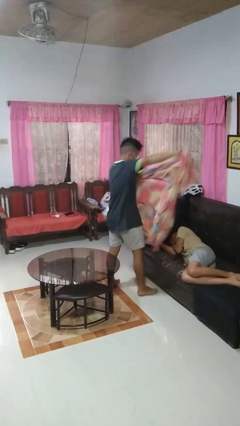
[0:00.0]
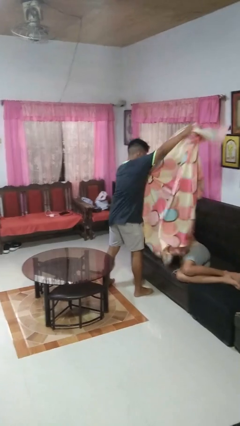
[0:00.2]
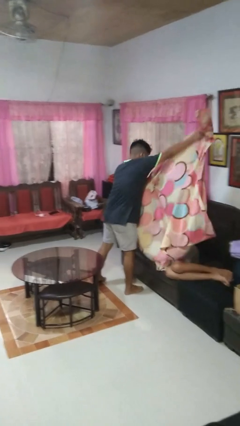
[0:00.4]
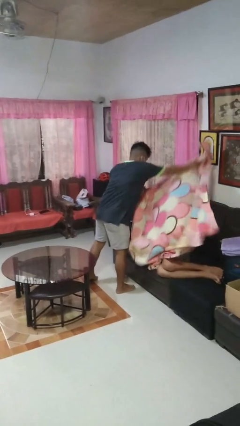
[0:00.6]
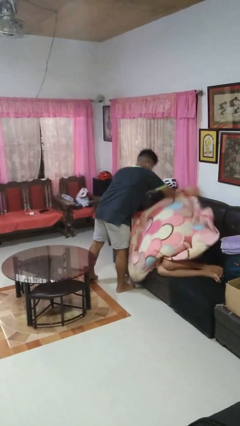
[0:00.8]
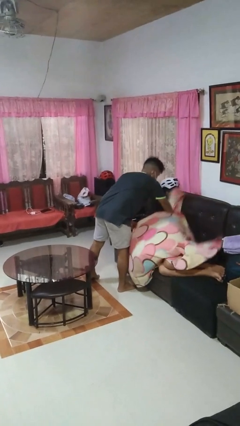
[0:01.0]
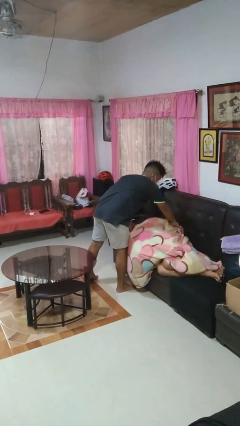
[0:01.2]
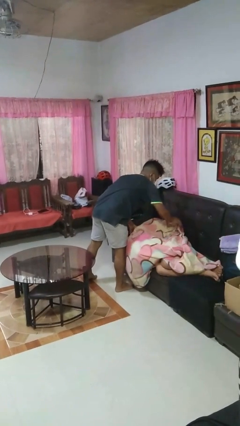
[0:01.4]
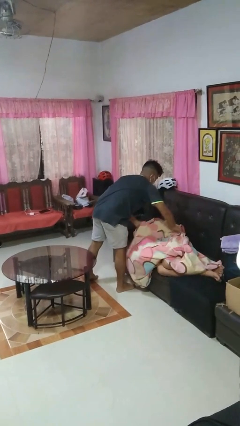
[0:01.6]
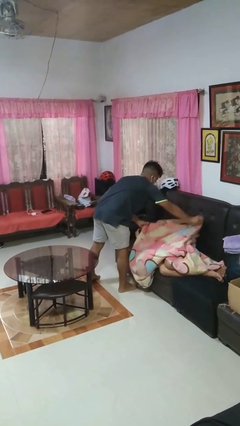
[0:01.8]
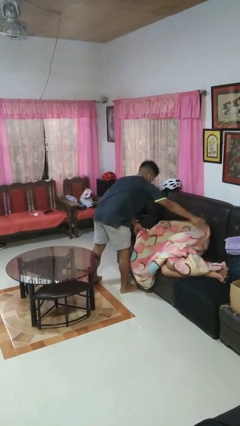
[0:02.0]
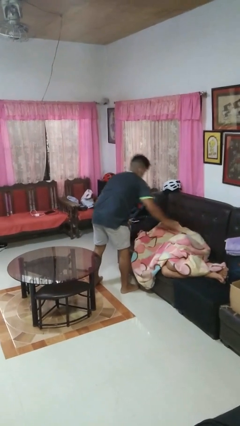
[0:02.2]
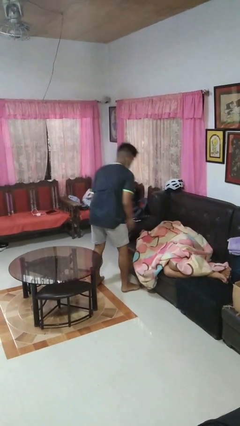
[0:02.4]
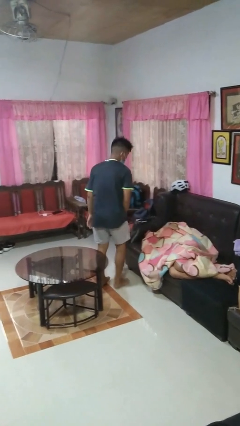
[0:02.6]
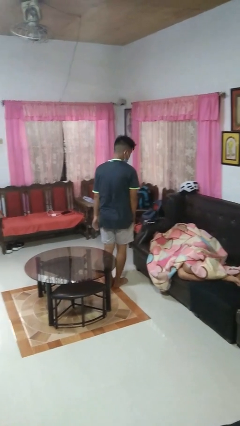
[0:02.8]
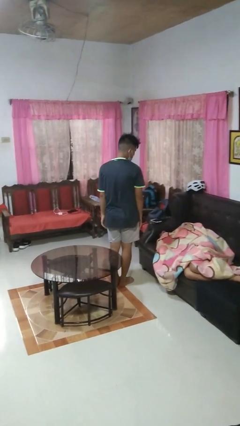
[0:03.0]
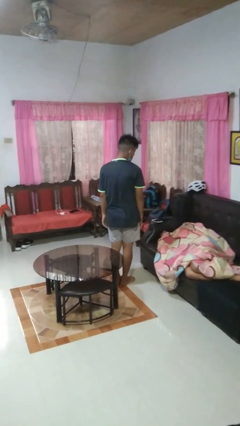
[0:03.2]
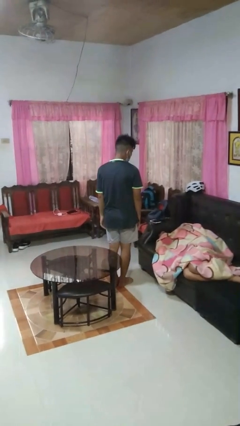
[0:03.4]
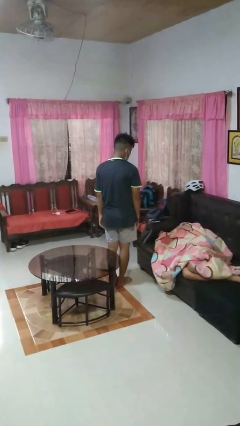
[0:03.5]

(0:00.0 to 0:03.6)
person covers friend with blanket

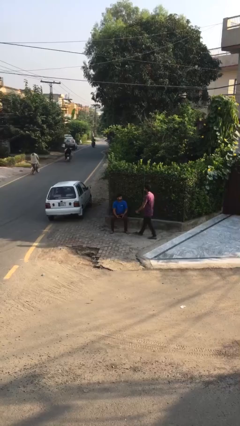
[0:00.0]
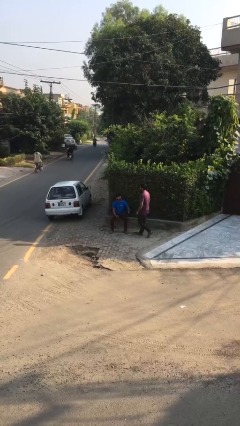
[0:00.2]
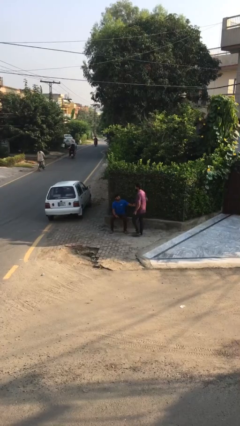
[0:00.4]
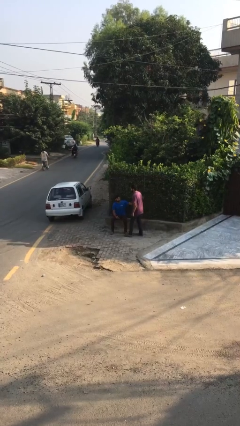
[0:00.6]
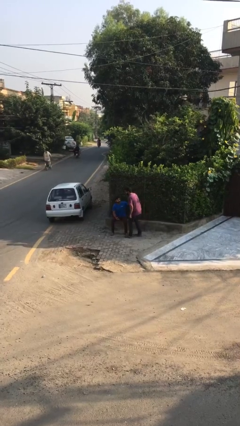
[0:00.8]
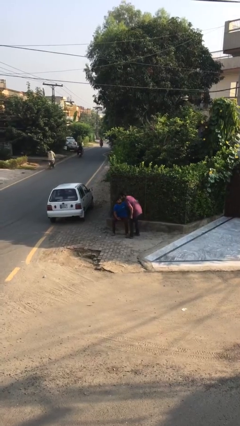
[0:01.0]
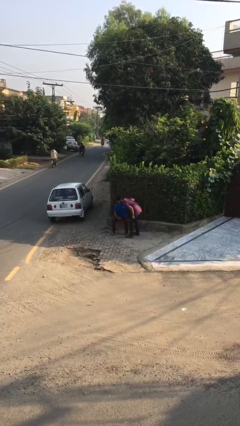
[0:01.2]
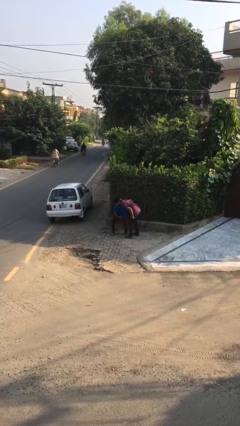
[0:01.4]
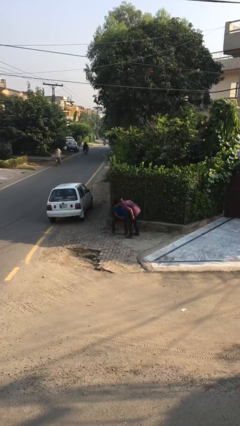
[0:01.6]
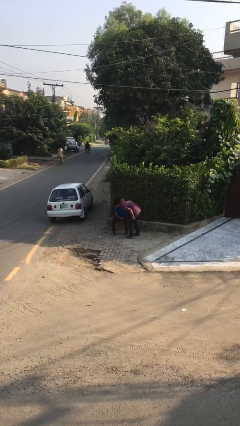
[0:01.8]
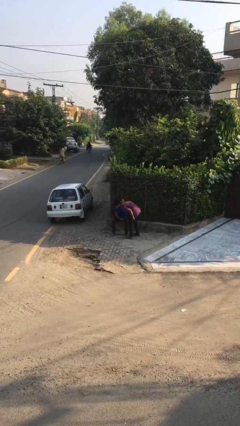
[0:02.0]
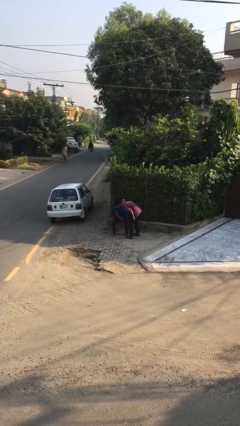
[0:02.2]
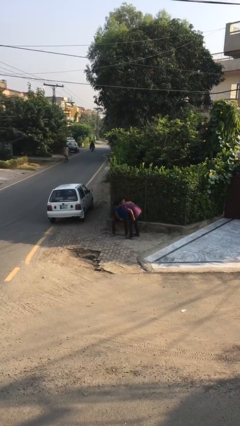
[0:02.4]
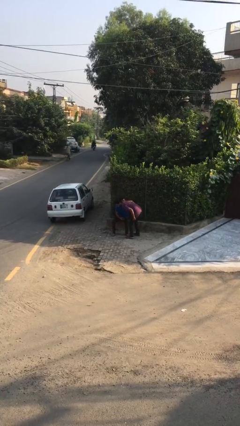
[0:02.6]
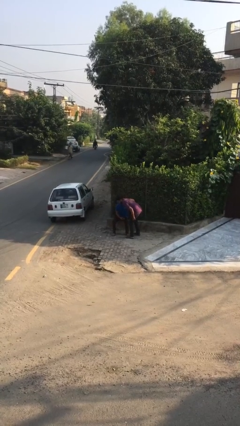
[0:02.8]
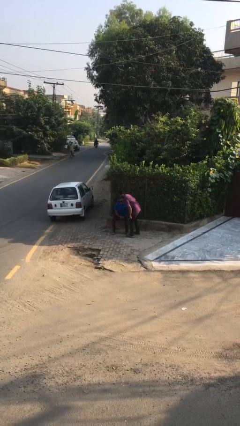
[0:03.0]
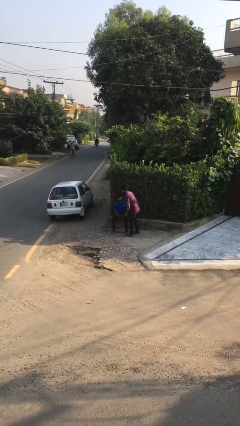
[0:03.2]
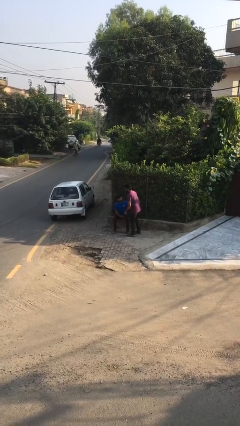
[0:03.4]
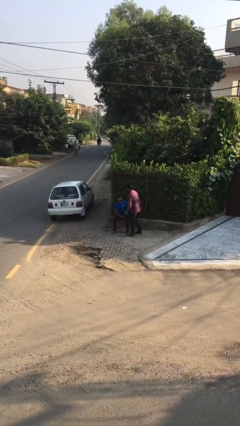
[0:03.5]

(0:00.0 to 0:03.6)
person embraces person

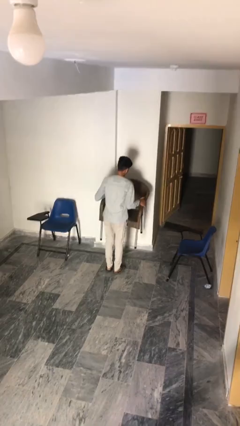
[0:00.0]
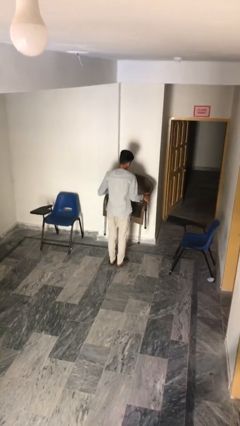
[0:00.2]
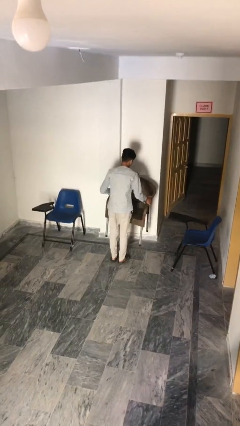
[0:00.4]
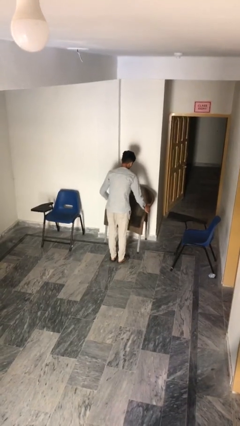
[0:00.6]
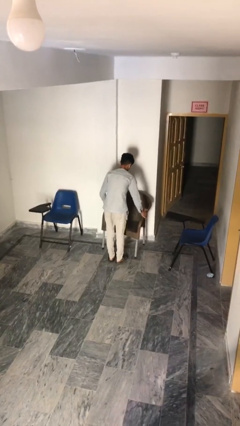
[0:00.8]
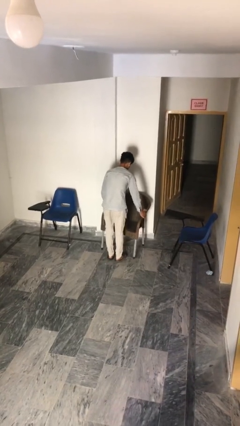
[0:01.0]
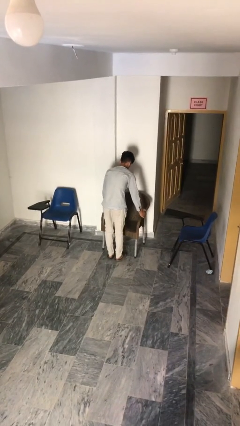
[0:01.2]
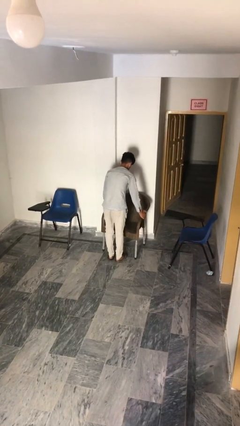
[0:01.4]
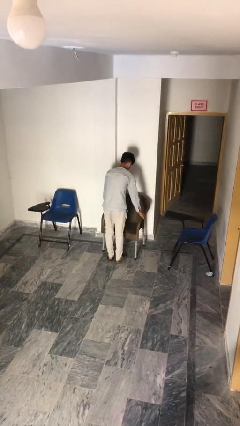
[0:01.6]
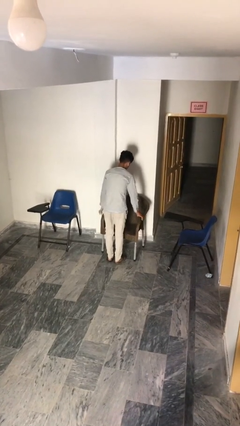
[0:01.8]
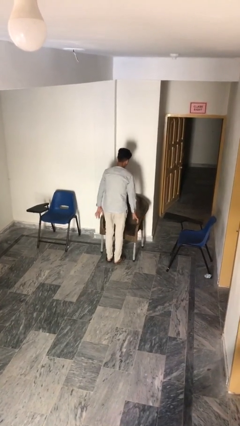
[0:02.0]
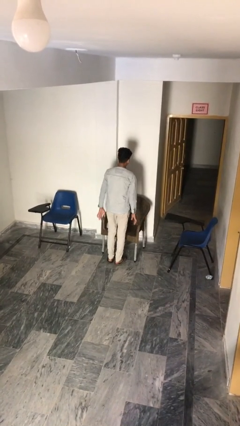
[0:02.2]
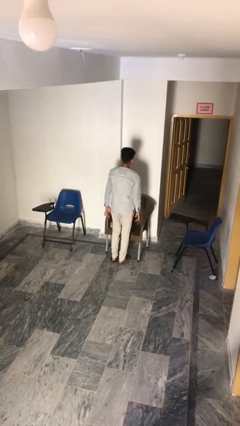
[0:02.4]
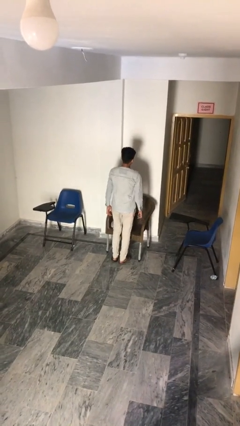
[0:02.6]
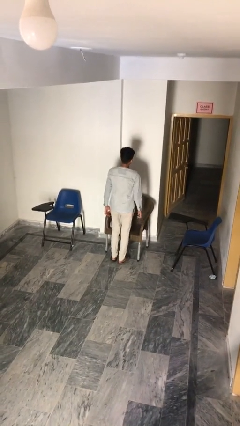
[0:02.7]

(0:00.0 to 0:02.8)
person puts down object on floor

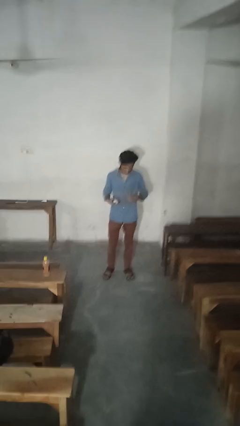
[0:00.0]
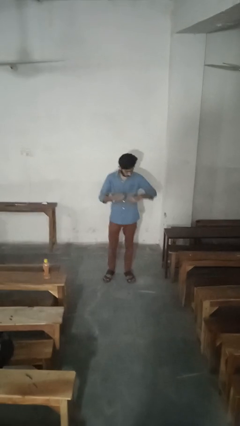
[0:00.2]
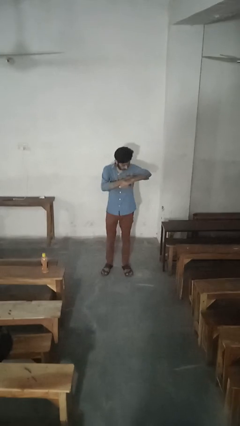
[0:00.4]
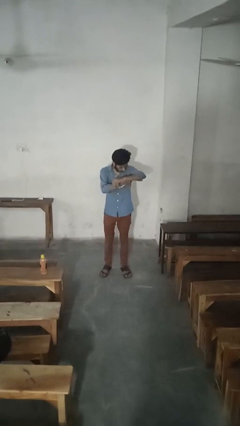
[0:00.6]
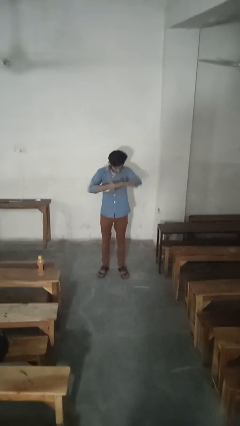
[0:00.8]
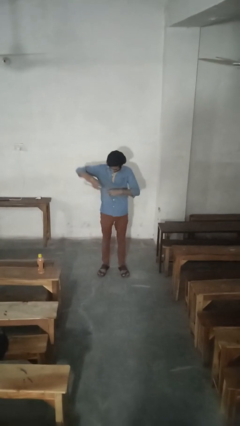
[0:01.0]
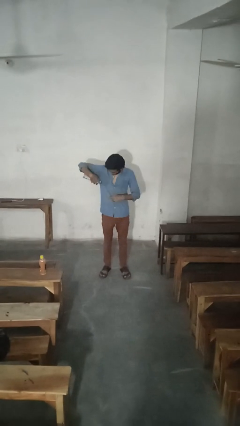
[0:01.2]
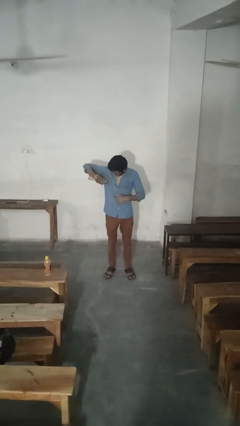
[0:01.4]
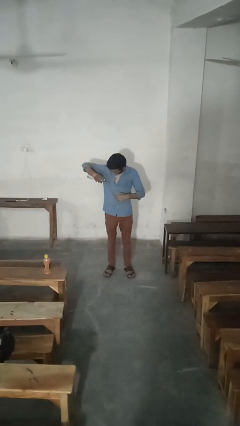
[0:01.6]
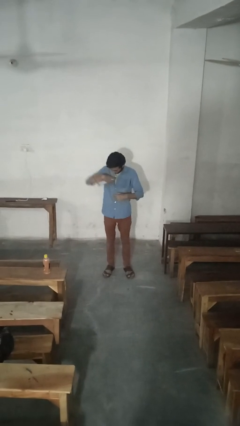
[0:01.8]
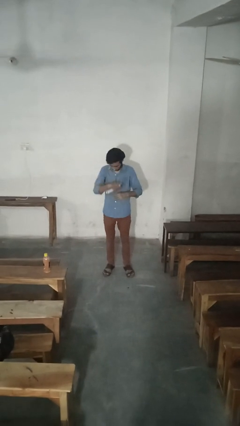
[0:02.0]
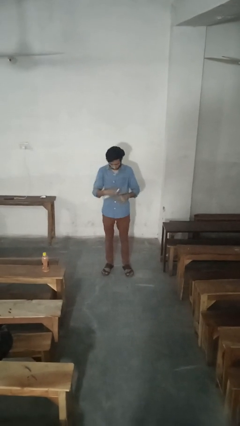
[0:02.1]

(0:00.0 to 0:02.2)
person applies deodorant

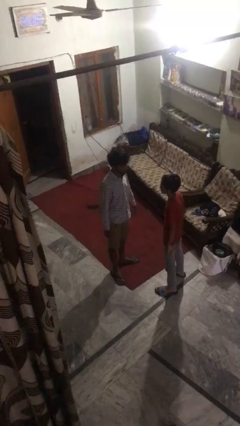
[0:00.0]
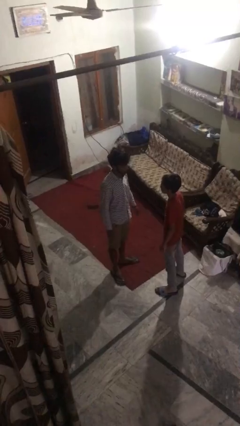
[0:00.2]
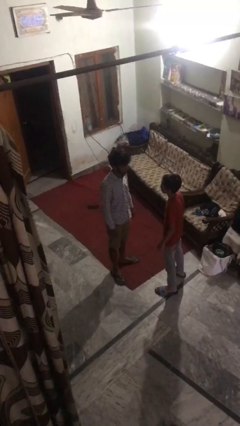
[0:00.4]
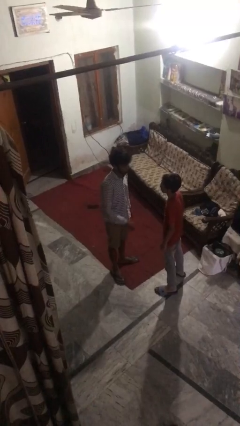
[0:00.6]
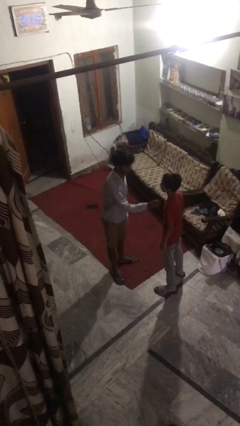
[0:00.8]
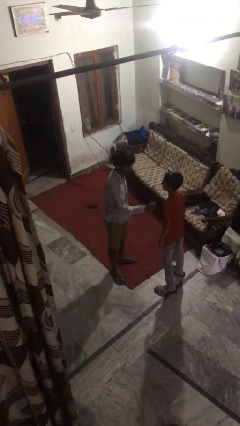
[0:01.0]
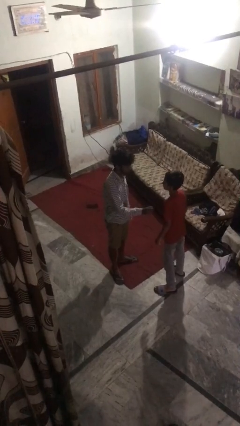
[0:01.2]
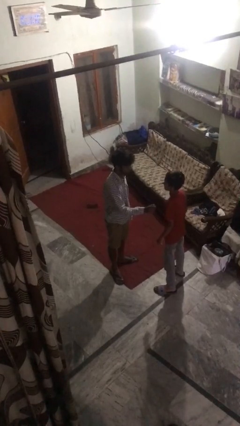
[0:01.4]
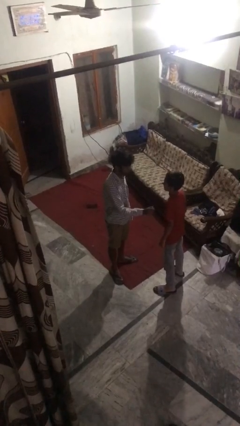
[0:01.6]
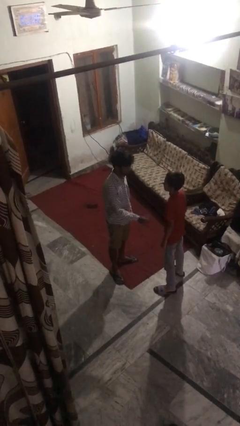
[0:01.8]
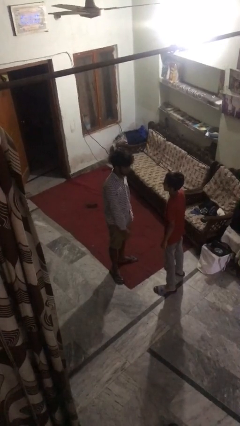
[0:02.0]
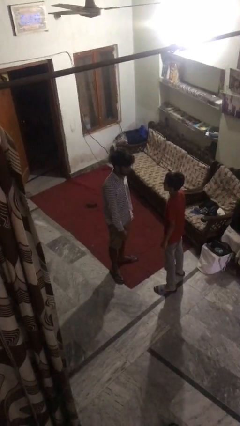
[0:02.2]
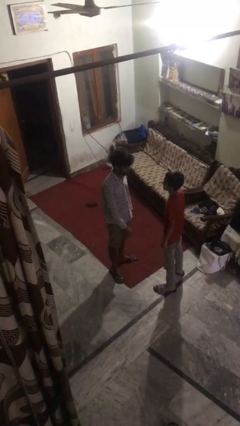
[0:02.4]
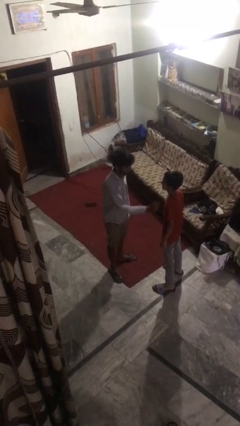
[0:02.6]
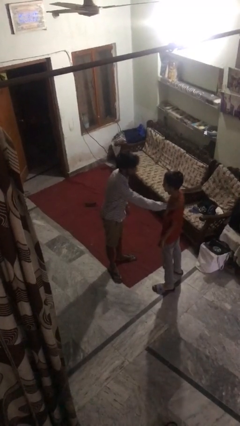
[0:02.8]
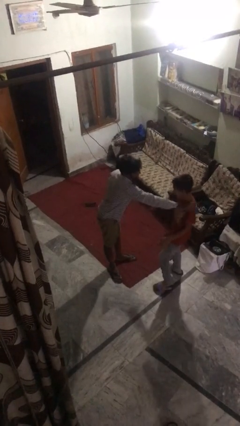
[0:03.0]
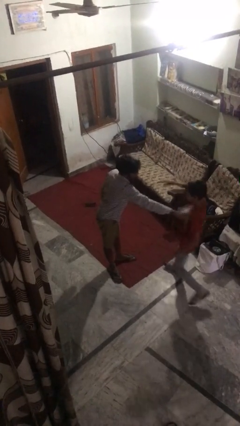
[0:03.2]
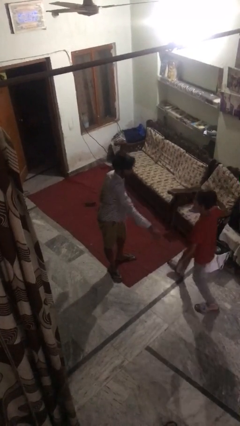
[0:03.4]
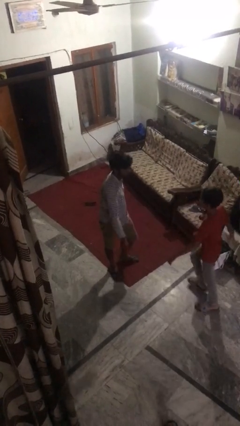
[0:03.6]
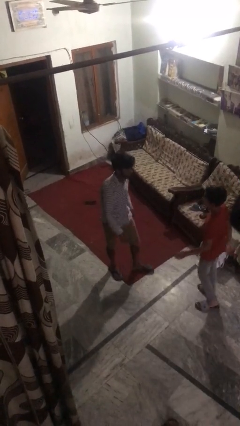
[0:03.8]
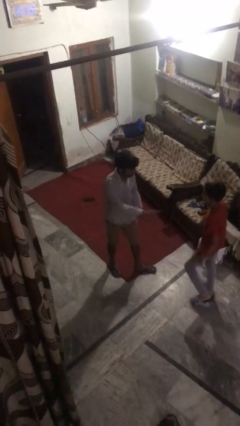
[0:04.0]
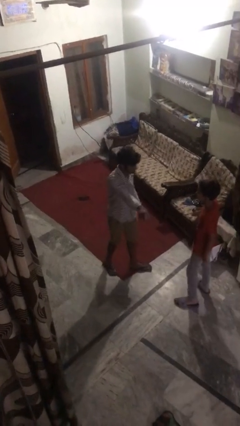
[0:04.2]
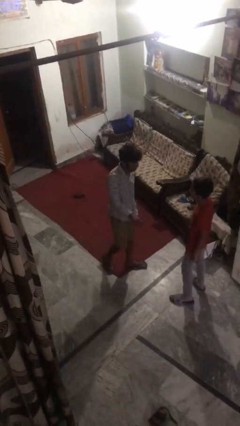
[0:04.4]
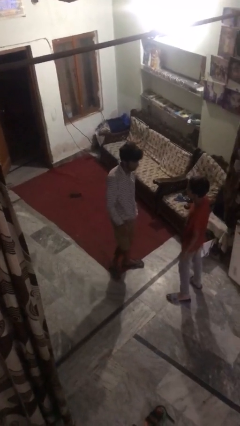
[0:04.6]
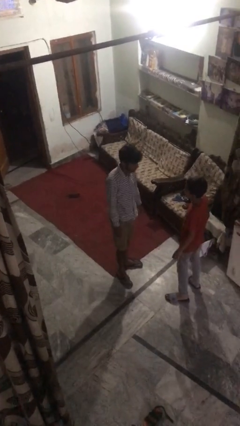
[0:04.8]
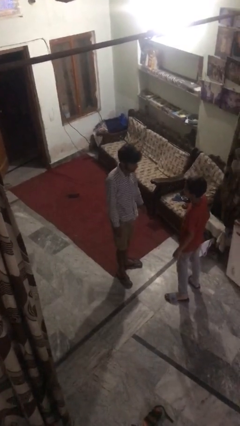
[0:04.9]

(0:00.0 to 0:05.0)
person shoves person
